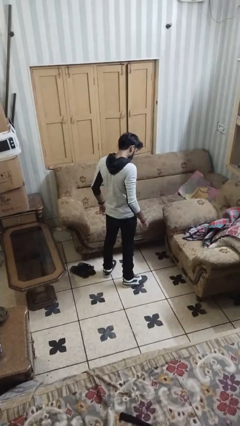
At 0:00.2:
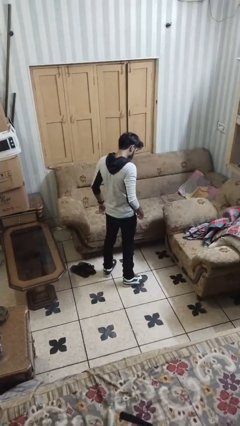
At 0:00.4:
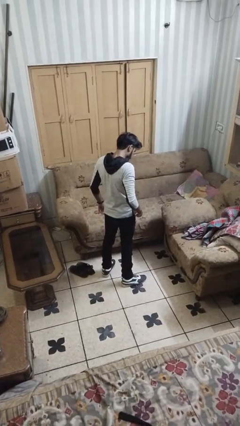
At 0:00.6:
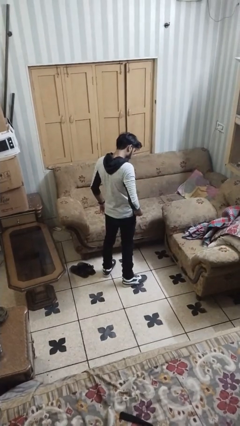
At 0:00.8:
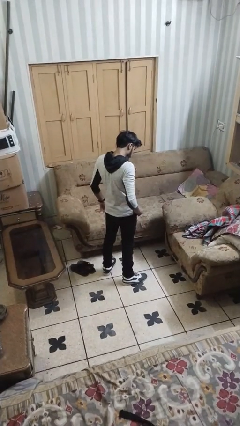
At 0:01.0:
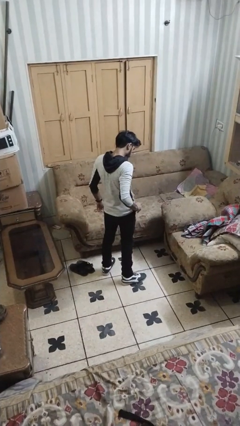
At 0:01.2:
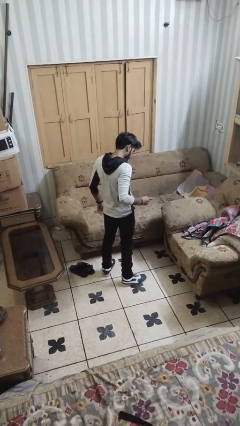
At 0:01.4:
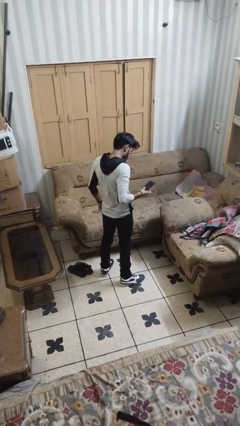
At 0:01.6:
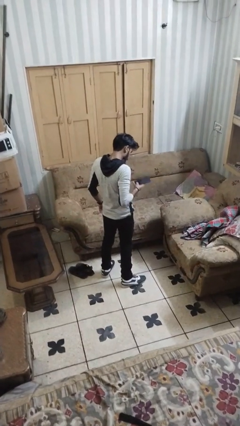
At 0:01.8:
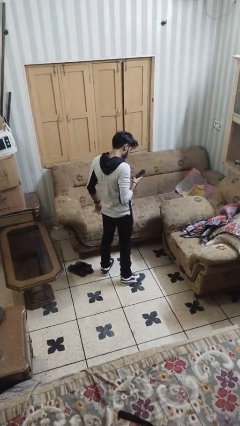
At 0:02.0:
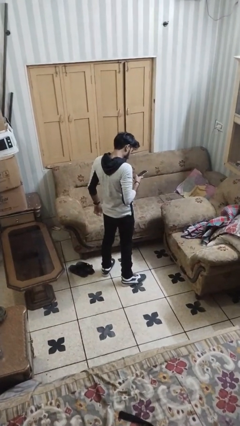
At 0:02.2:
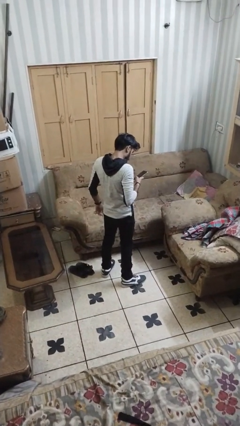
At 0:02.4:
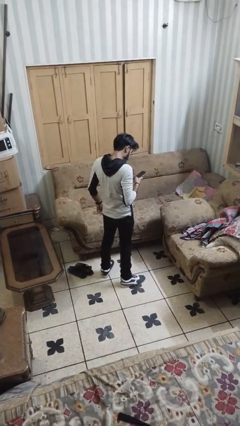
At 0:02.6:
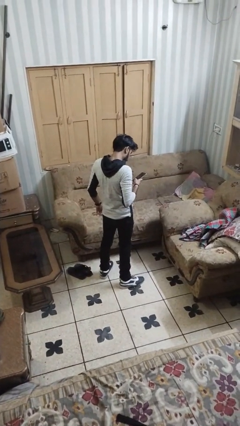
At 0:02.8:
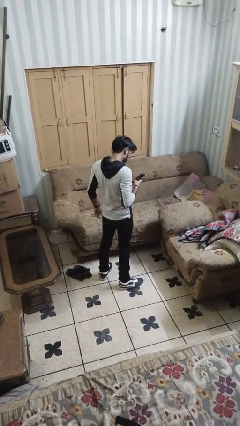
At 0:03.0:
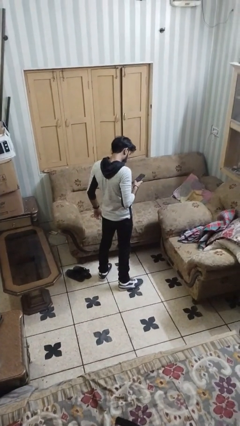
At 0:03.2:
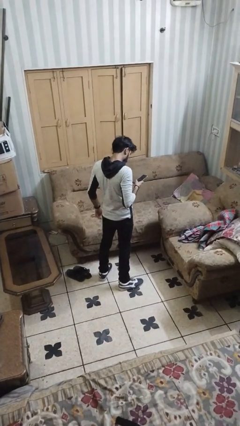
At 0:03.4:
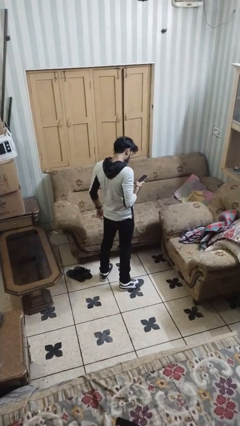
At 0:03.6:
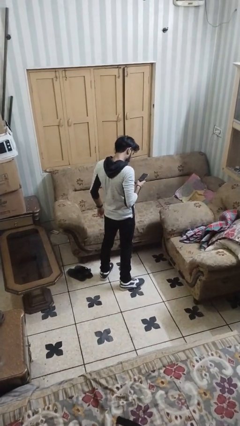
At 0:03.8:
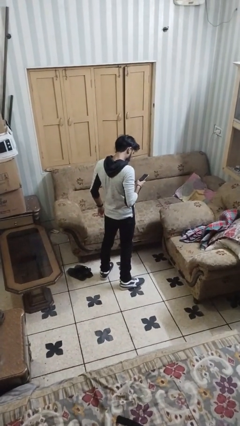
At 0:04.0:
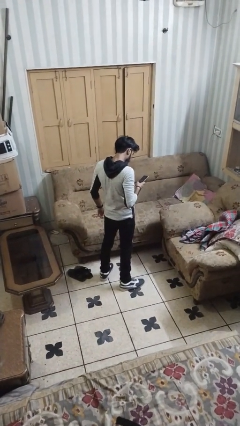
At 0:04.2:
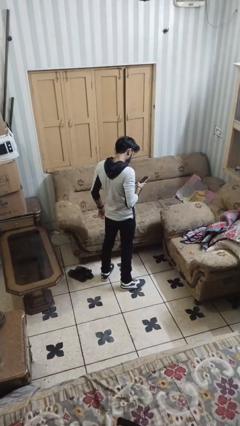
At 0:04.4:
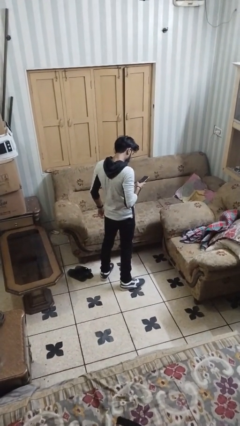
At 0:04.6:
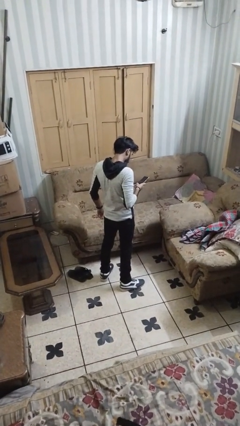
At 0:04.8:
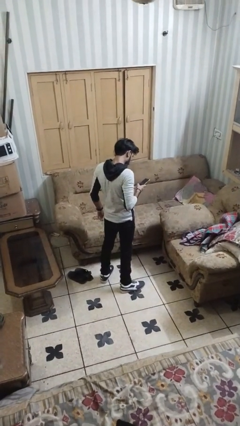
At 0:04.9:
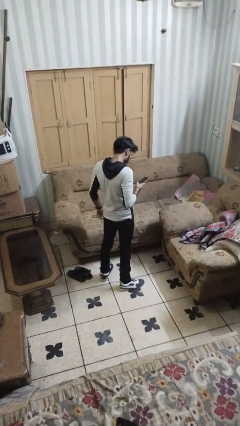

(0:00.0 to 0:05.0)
person takes phone from pocket

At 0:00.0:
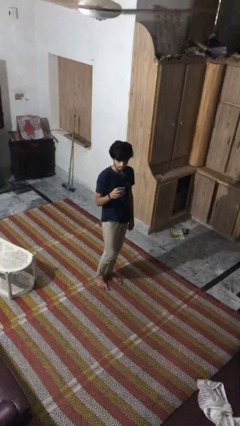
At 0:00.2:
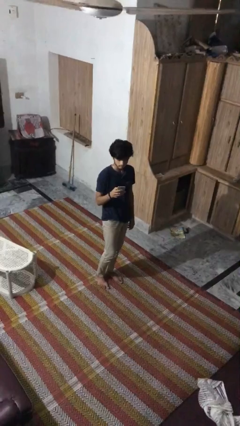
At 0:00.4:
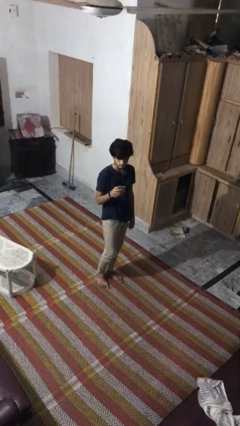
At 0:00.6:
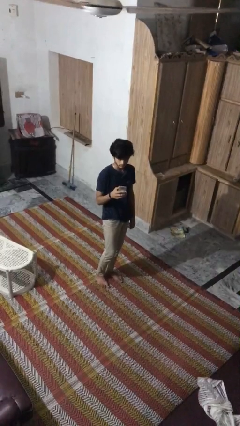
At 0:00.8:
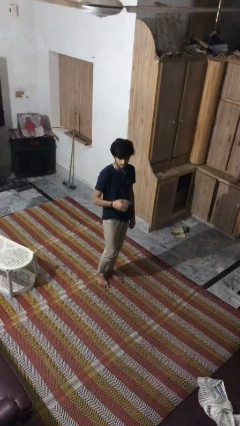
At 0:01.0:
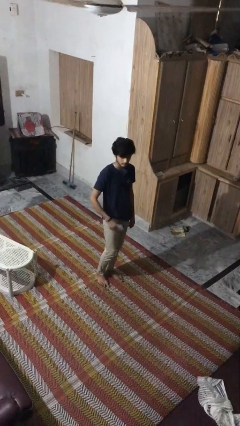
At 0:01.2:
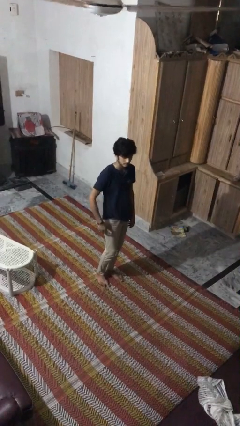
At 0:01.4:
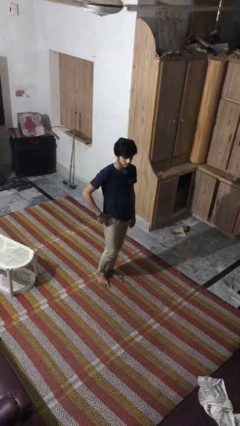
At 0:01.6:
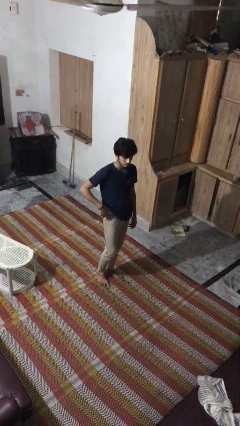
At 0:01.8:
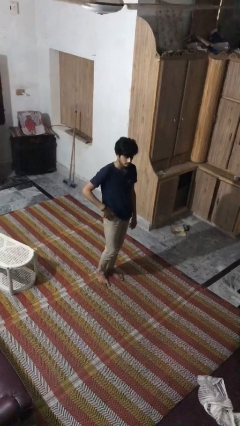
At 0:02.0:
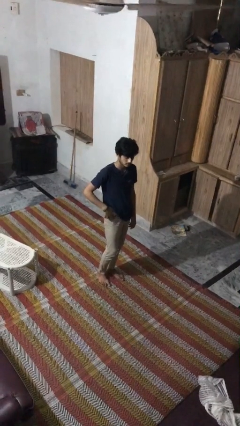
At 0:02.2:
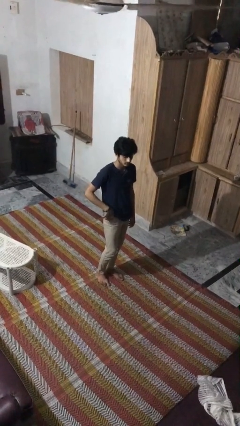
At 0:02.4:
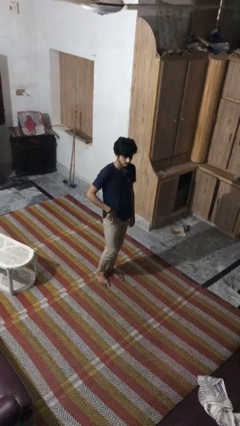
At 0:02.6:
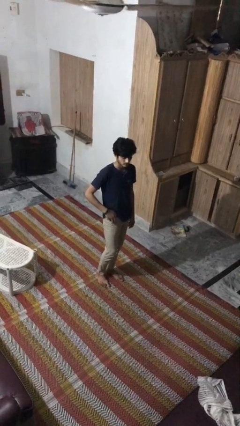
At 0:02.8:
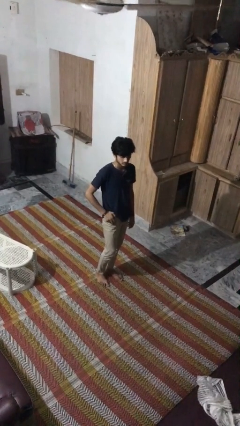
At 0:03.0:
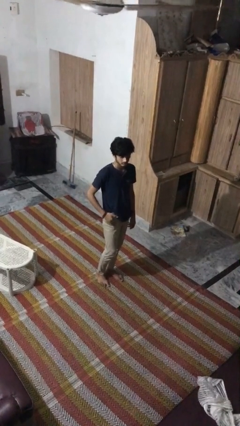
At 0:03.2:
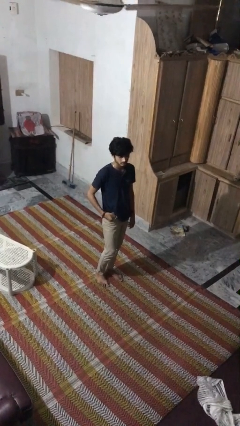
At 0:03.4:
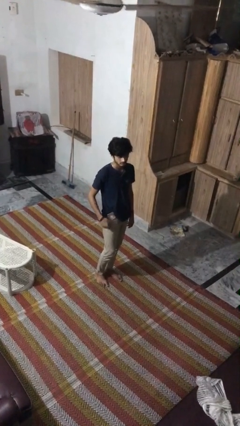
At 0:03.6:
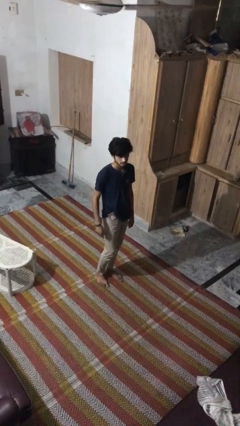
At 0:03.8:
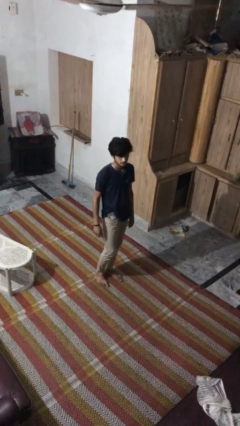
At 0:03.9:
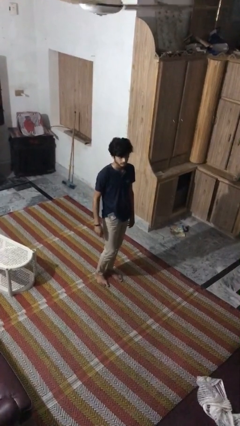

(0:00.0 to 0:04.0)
person puts phone into pocket

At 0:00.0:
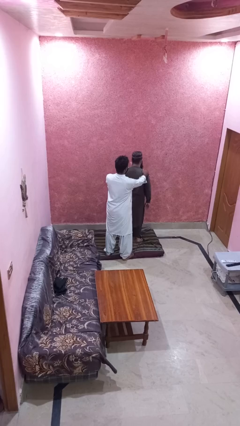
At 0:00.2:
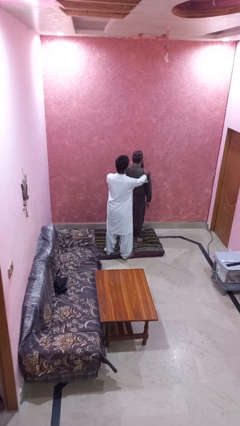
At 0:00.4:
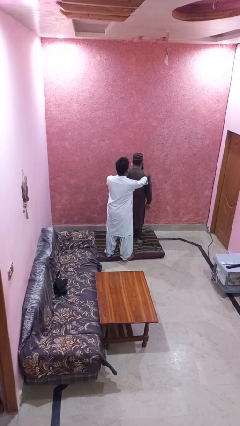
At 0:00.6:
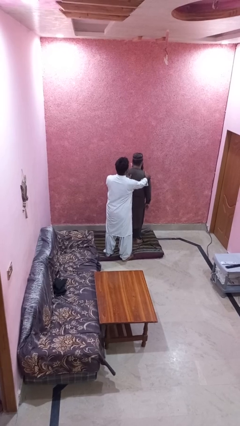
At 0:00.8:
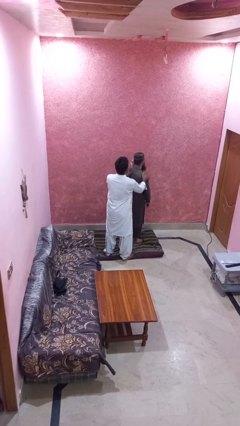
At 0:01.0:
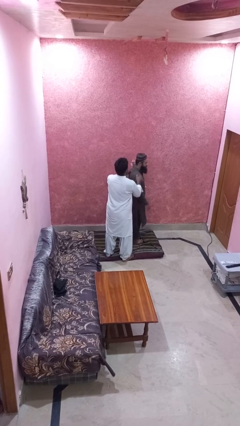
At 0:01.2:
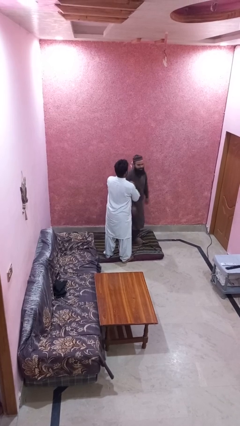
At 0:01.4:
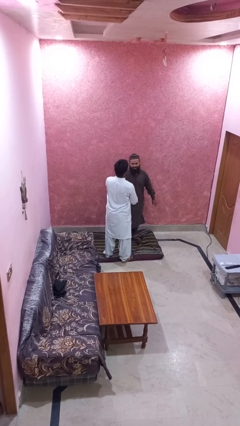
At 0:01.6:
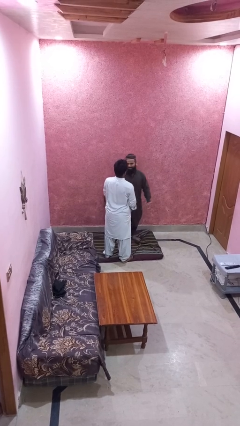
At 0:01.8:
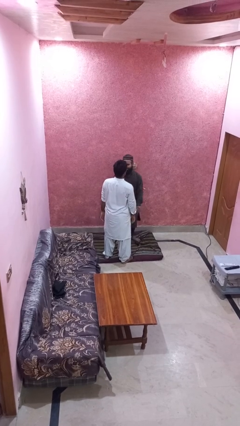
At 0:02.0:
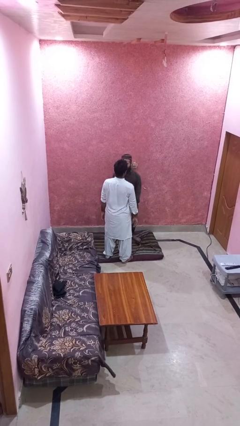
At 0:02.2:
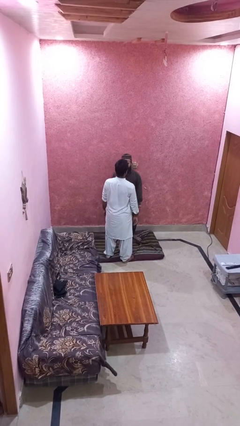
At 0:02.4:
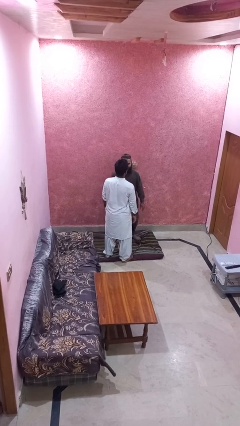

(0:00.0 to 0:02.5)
person spins person around

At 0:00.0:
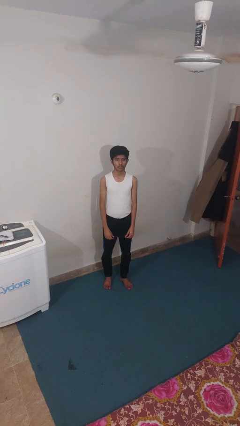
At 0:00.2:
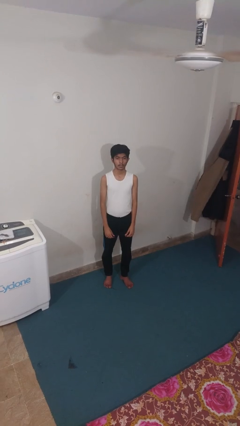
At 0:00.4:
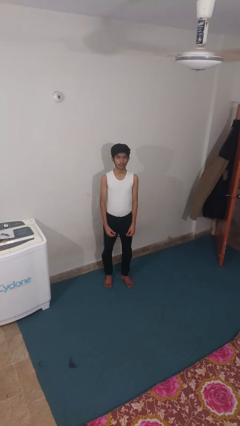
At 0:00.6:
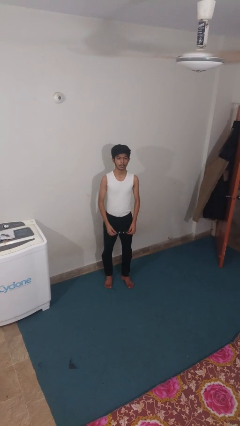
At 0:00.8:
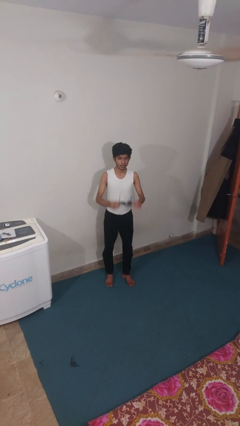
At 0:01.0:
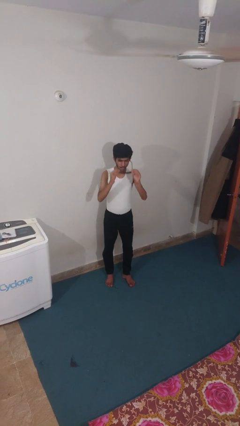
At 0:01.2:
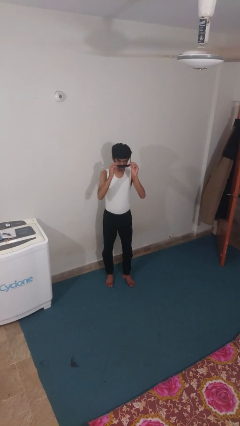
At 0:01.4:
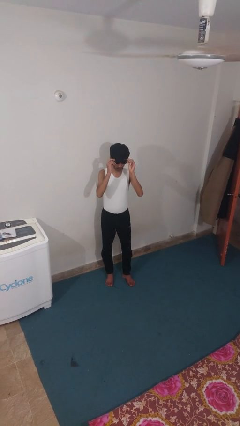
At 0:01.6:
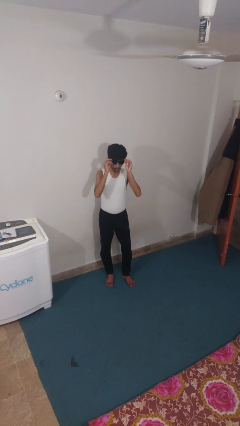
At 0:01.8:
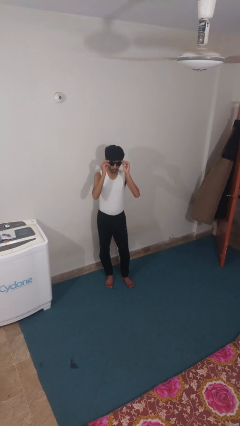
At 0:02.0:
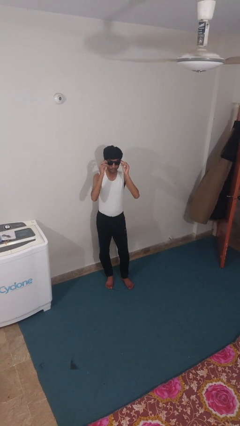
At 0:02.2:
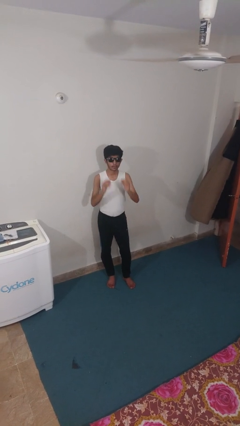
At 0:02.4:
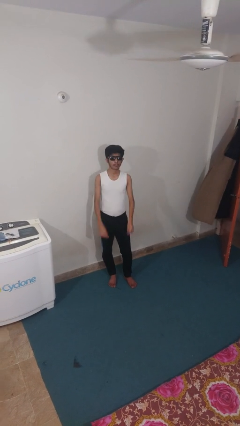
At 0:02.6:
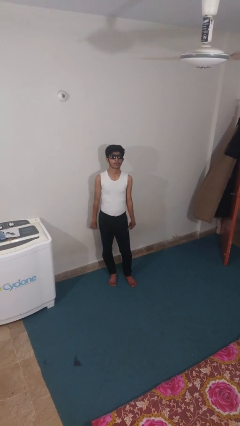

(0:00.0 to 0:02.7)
person puts on sunglasses

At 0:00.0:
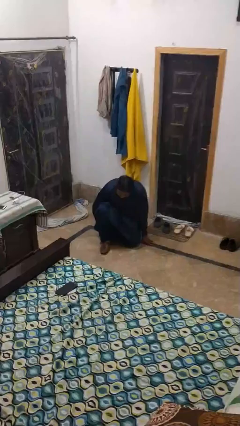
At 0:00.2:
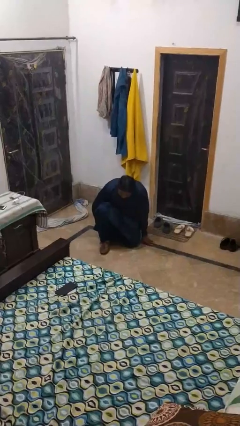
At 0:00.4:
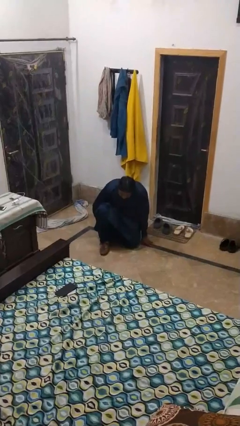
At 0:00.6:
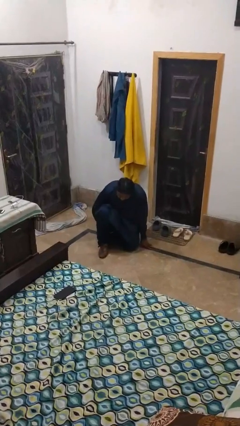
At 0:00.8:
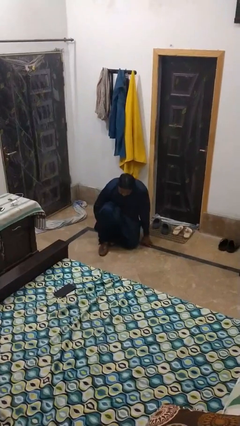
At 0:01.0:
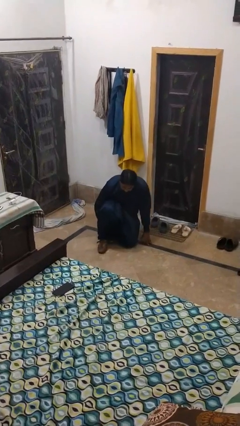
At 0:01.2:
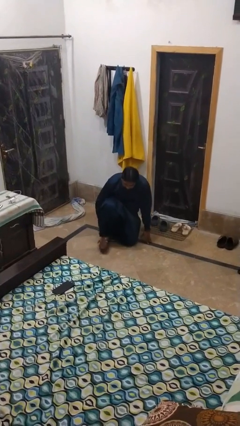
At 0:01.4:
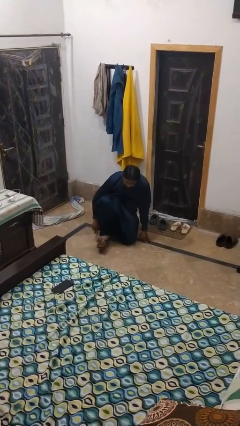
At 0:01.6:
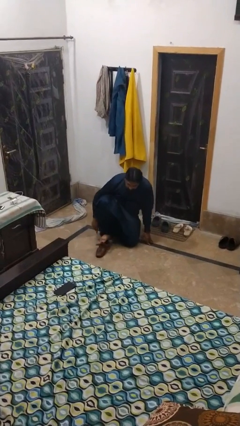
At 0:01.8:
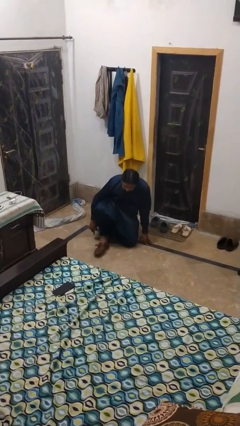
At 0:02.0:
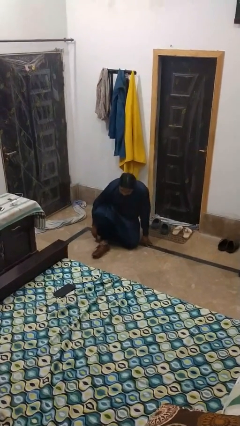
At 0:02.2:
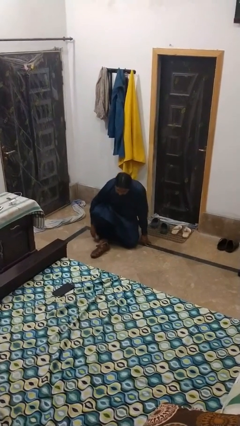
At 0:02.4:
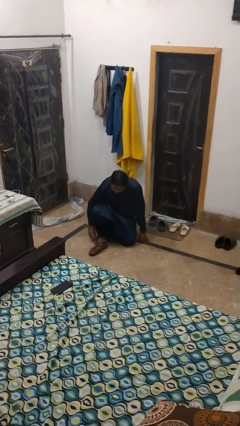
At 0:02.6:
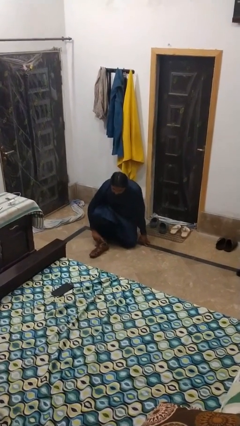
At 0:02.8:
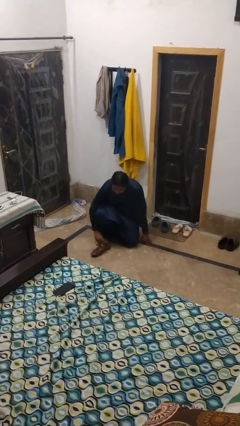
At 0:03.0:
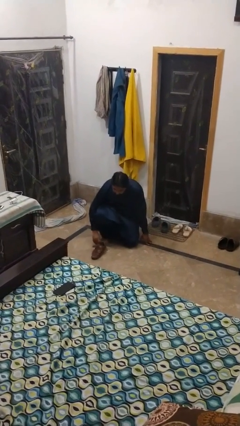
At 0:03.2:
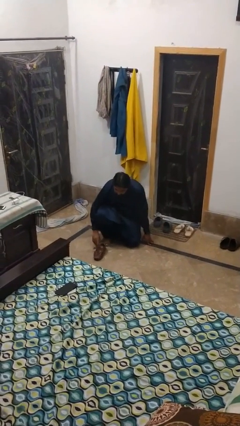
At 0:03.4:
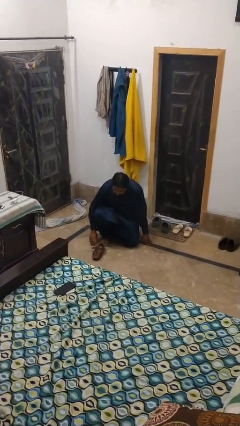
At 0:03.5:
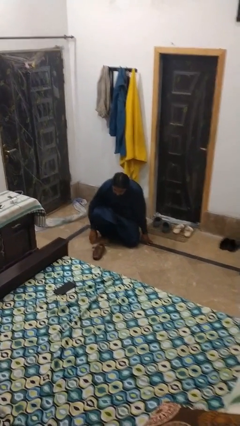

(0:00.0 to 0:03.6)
person takes off shoes
